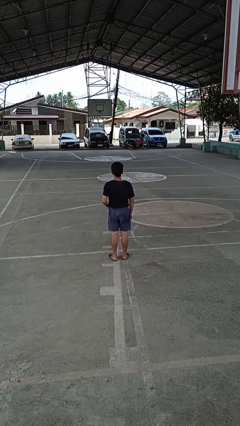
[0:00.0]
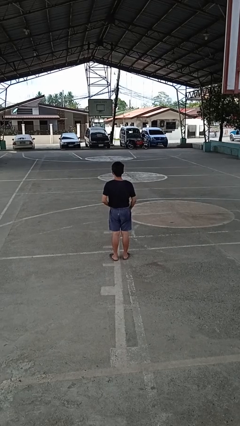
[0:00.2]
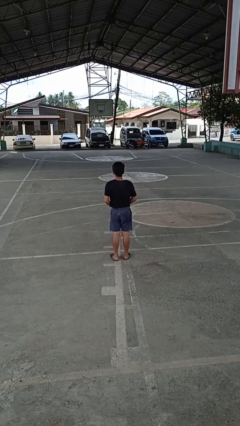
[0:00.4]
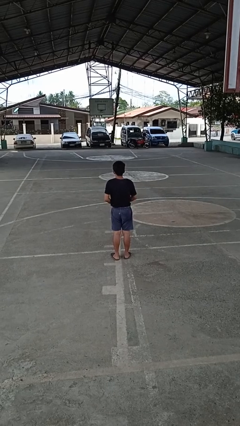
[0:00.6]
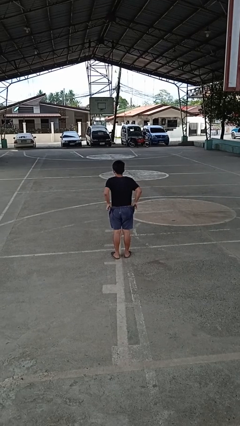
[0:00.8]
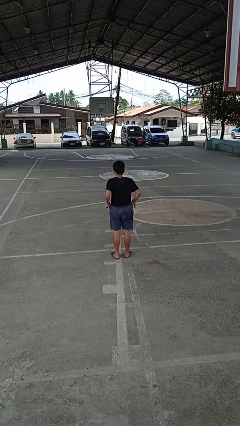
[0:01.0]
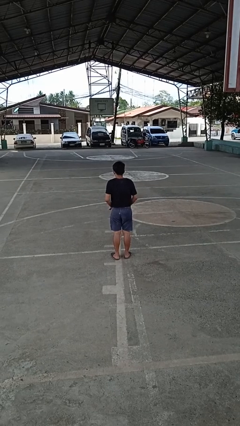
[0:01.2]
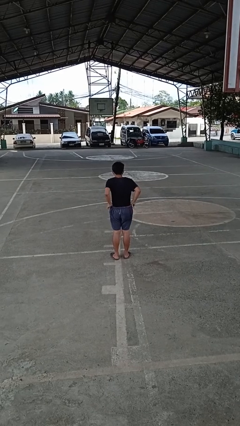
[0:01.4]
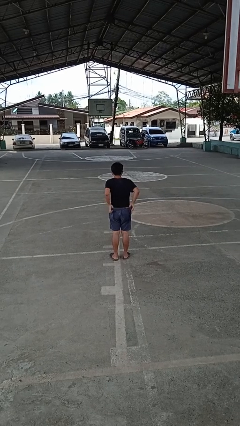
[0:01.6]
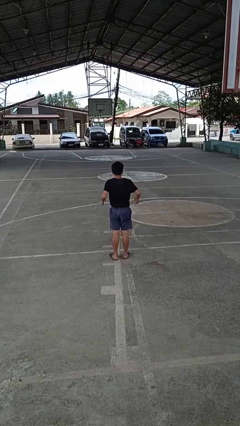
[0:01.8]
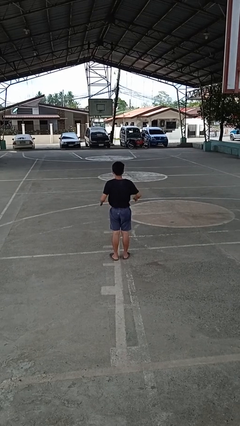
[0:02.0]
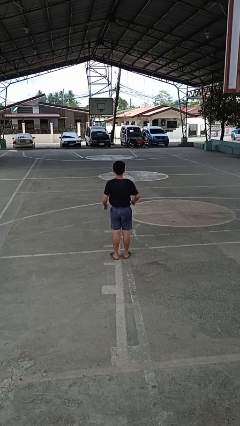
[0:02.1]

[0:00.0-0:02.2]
person hikes up pants

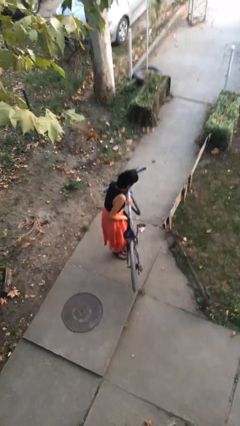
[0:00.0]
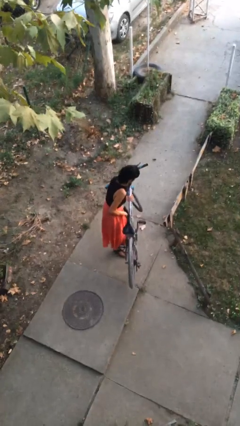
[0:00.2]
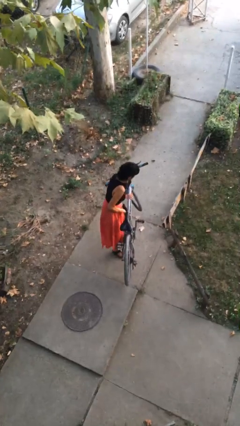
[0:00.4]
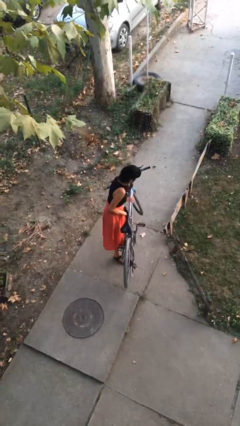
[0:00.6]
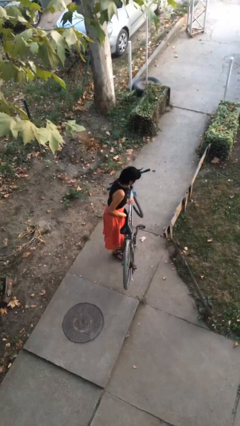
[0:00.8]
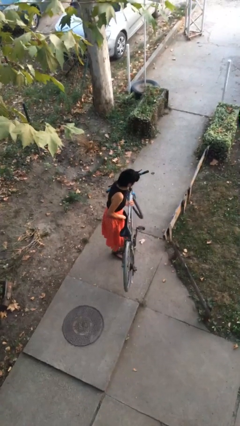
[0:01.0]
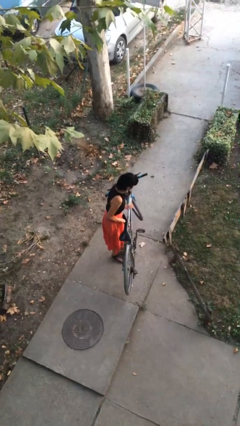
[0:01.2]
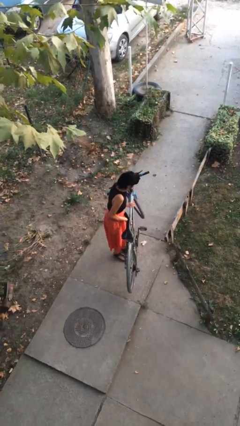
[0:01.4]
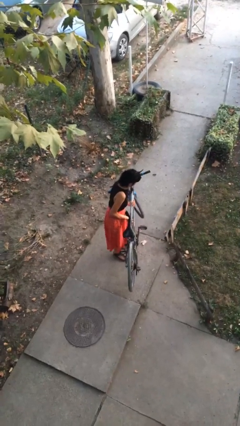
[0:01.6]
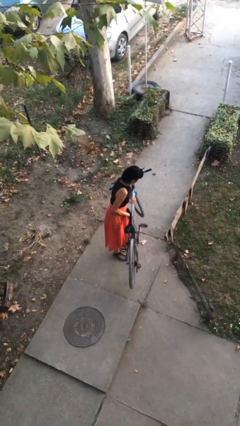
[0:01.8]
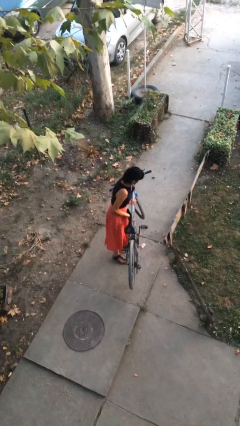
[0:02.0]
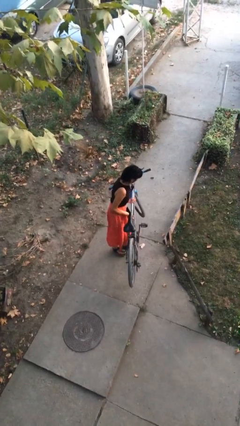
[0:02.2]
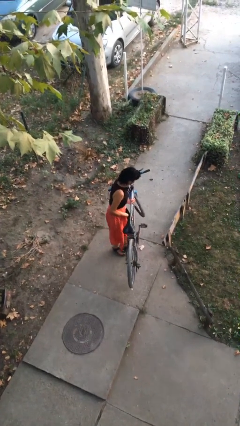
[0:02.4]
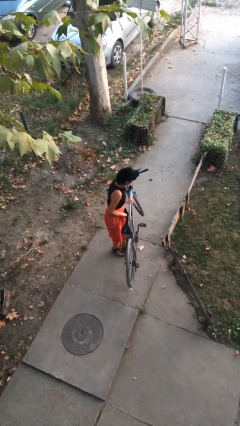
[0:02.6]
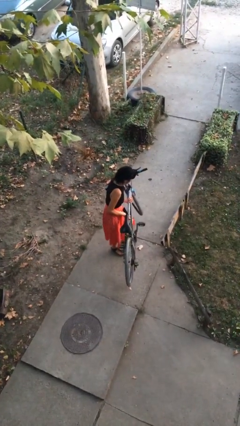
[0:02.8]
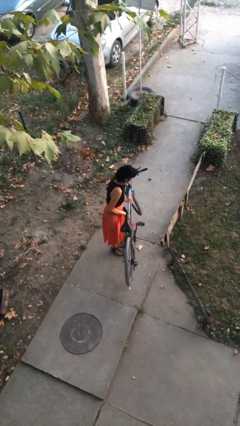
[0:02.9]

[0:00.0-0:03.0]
person carries heavy object

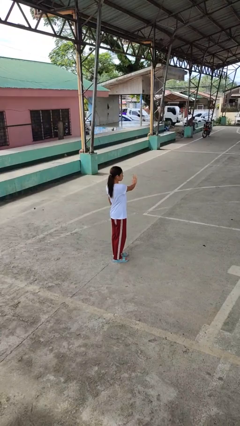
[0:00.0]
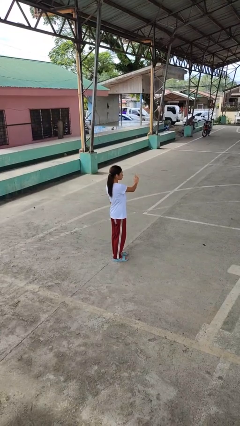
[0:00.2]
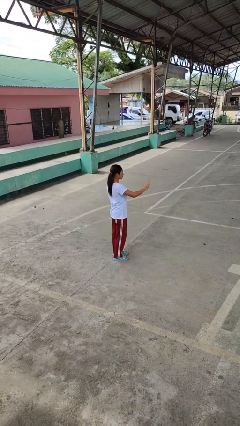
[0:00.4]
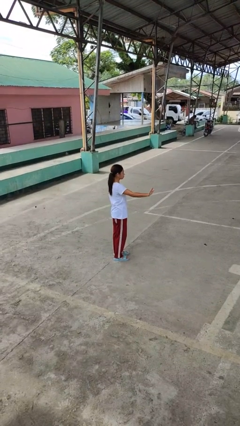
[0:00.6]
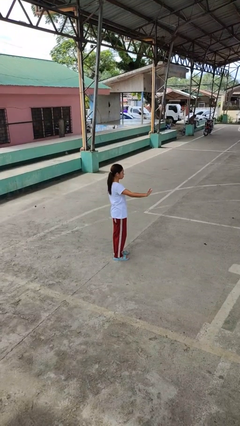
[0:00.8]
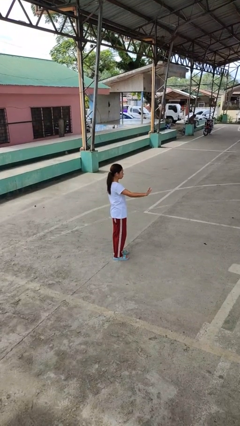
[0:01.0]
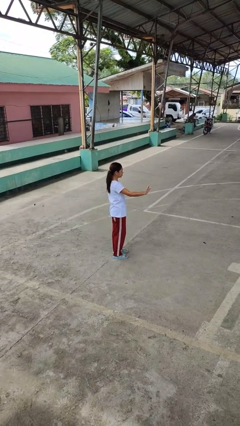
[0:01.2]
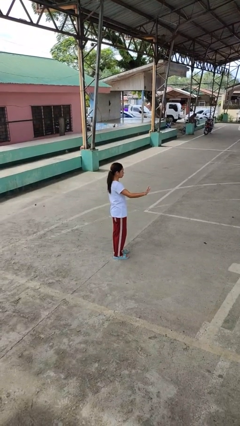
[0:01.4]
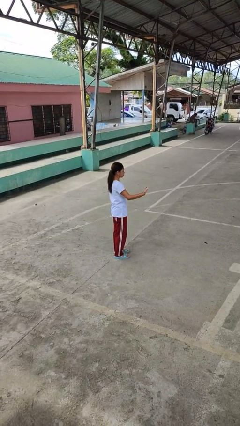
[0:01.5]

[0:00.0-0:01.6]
person gestures swipe right

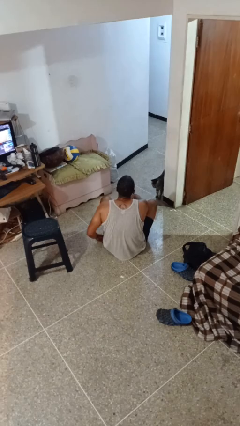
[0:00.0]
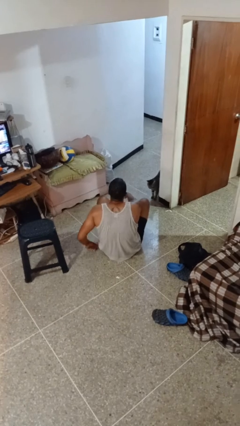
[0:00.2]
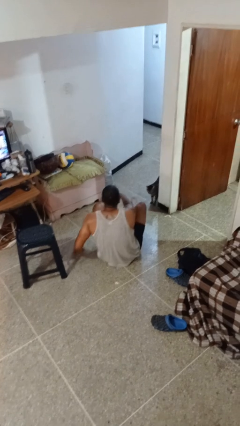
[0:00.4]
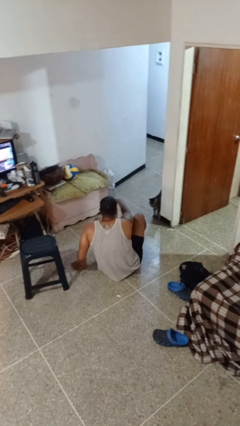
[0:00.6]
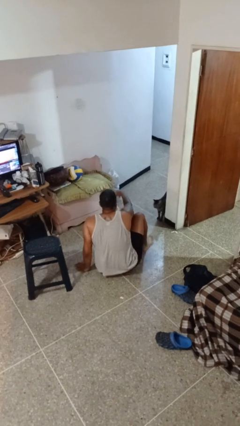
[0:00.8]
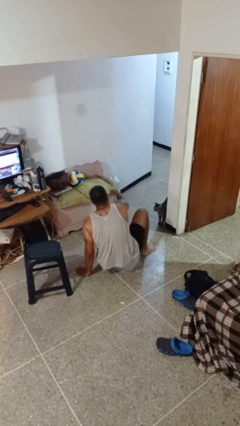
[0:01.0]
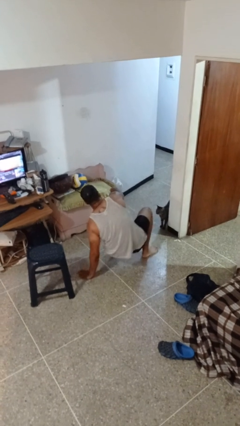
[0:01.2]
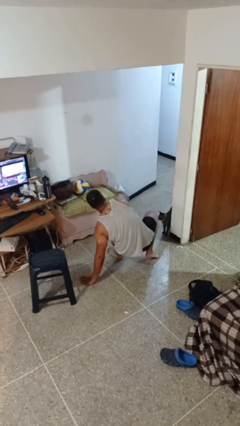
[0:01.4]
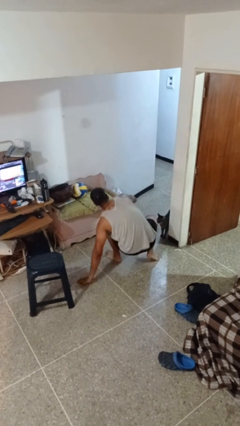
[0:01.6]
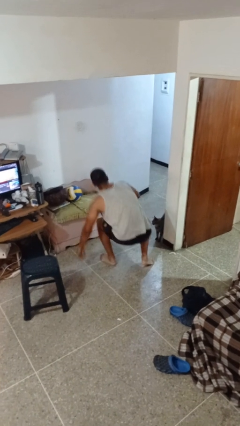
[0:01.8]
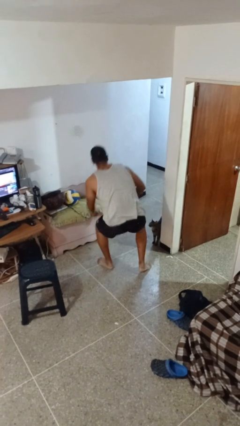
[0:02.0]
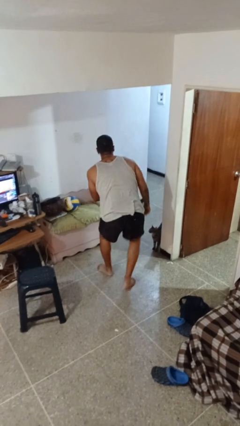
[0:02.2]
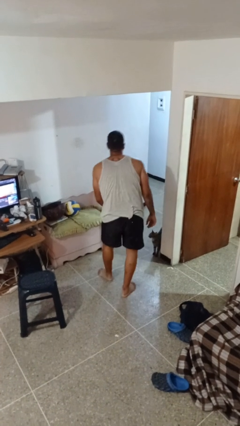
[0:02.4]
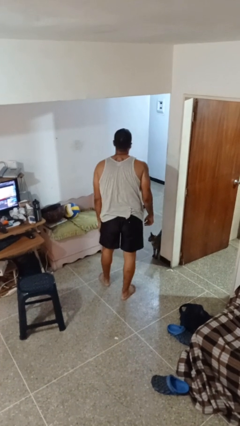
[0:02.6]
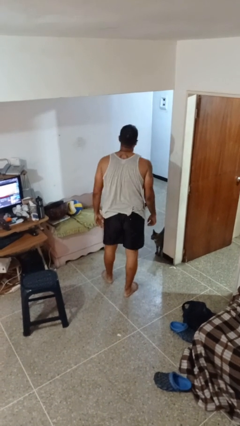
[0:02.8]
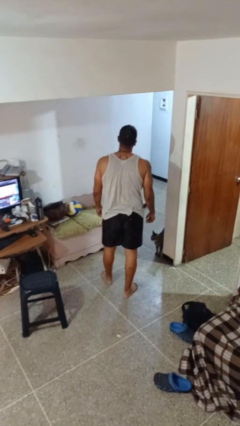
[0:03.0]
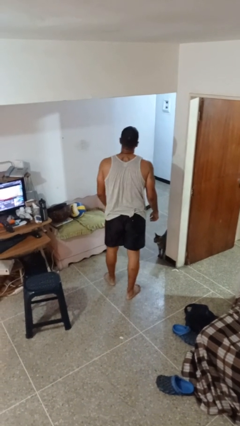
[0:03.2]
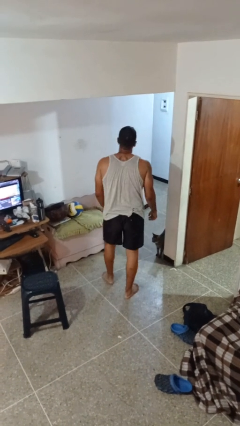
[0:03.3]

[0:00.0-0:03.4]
person stands up from floor

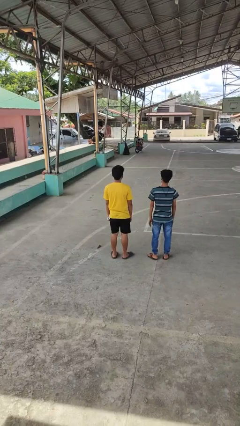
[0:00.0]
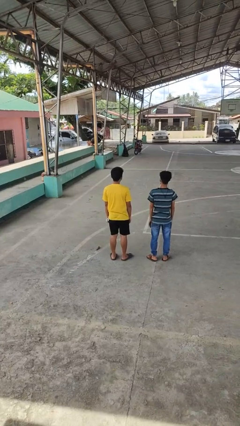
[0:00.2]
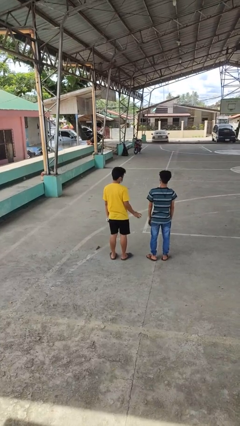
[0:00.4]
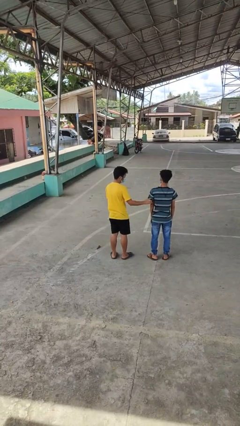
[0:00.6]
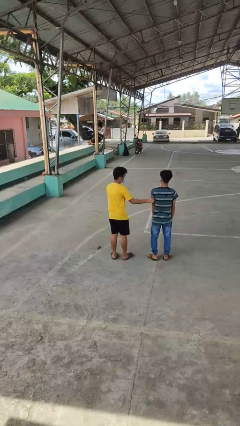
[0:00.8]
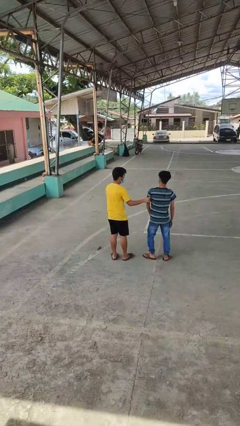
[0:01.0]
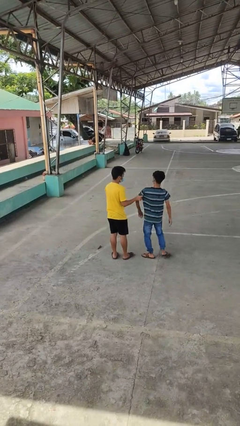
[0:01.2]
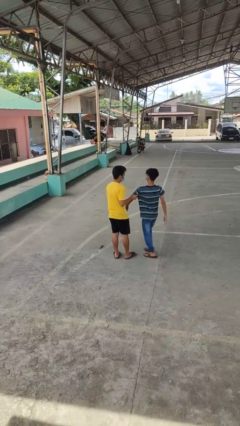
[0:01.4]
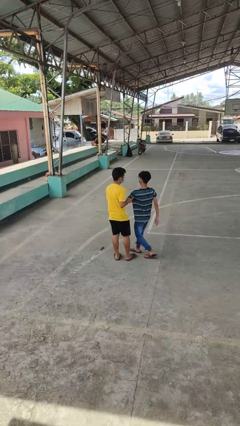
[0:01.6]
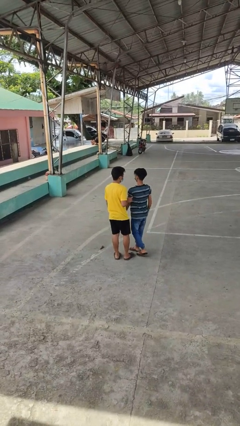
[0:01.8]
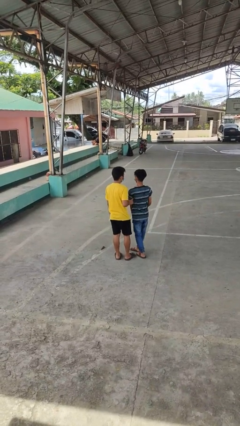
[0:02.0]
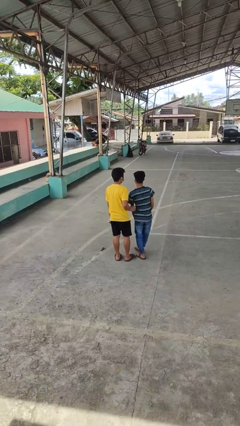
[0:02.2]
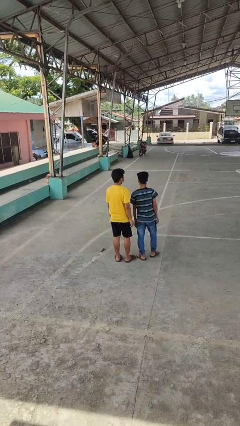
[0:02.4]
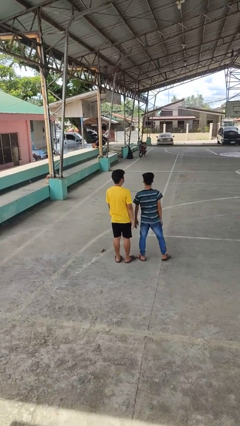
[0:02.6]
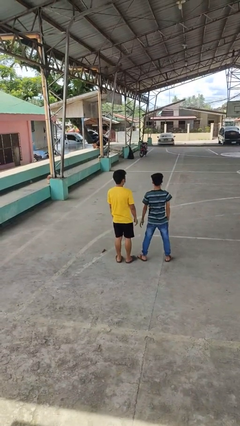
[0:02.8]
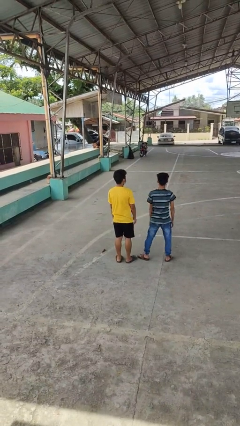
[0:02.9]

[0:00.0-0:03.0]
person grabs person by bicep

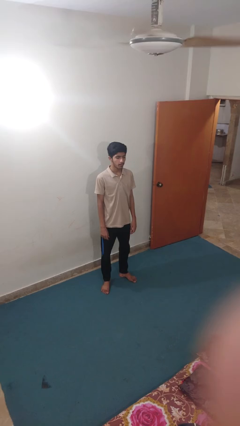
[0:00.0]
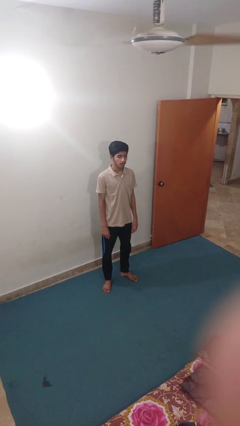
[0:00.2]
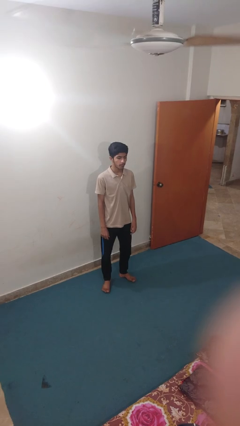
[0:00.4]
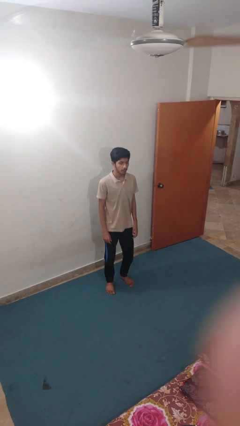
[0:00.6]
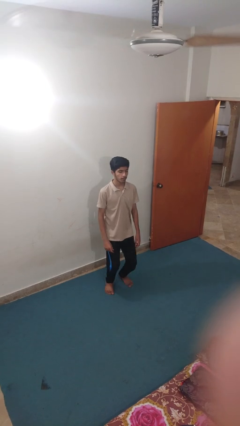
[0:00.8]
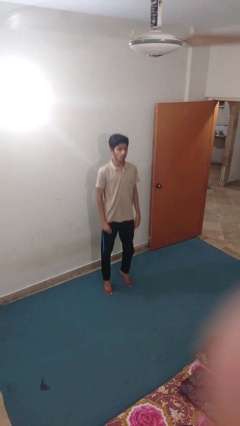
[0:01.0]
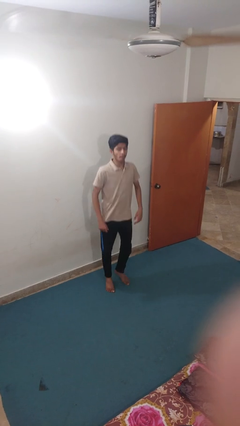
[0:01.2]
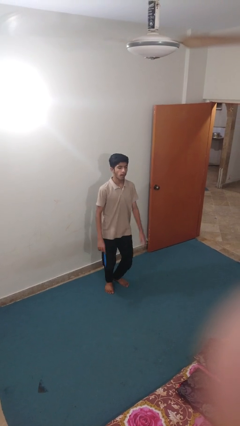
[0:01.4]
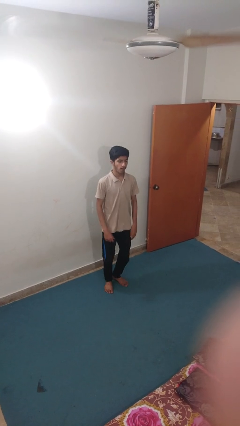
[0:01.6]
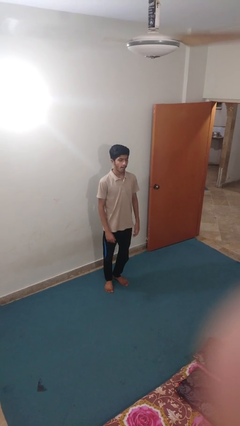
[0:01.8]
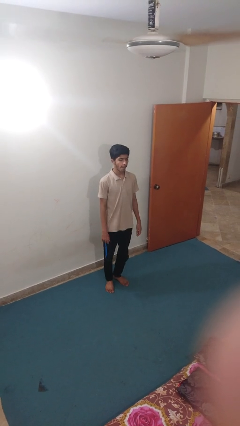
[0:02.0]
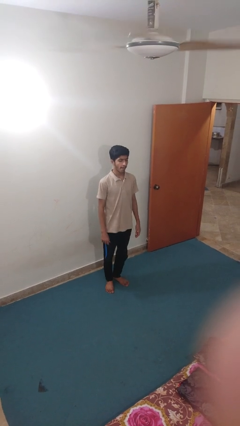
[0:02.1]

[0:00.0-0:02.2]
person jumps

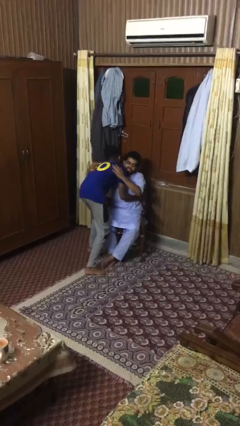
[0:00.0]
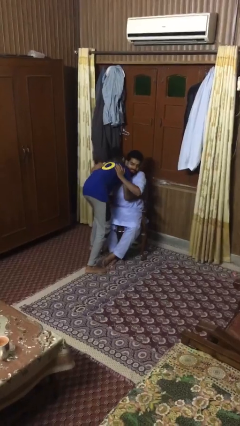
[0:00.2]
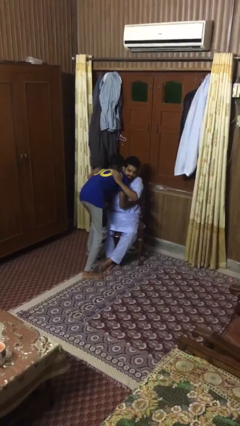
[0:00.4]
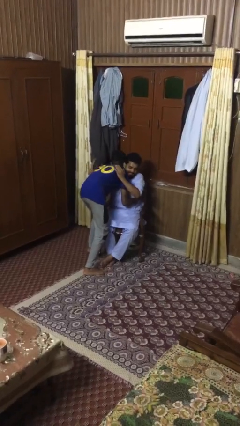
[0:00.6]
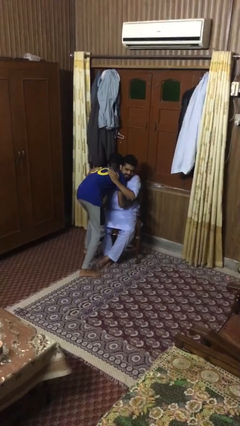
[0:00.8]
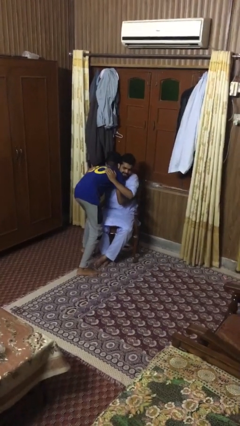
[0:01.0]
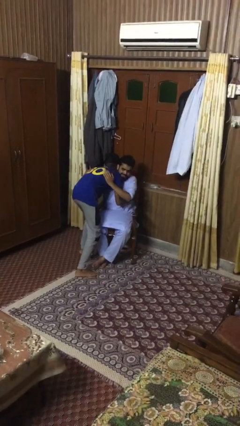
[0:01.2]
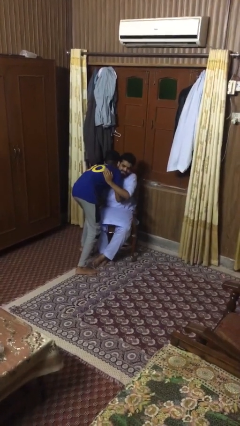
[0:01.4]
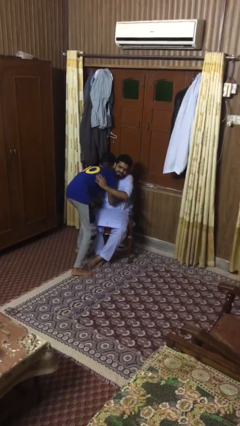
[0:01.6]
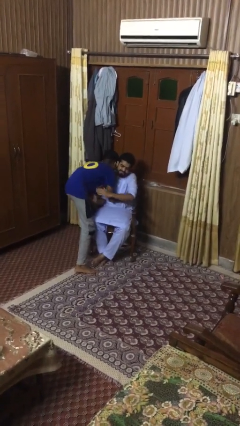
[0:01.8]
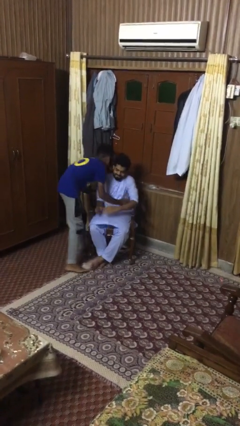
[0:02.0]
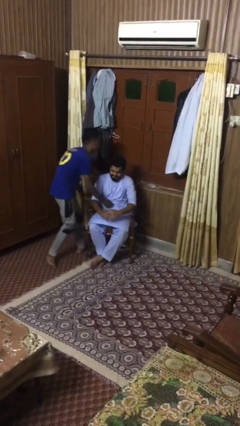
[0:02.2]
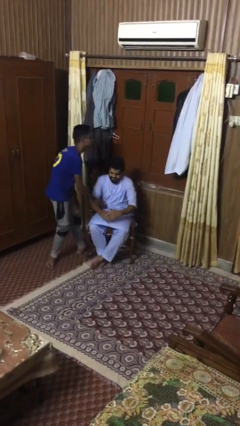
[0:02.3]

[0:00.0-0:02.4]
person embraces person
